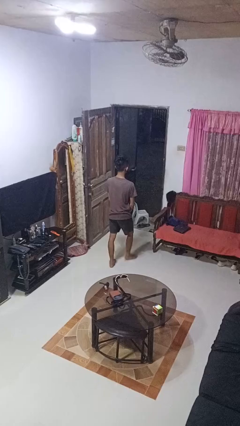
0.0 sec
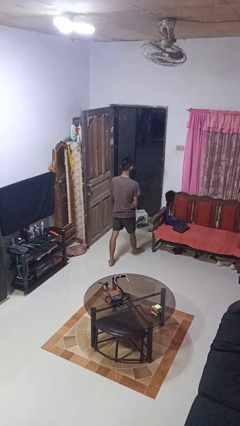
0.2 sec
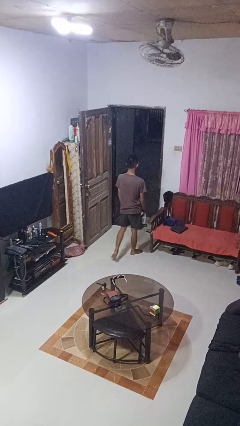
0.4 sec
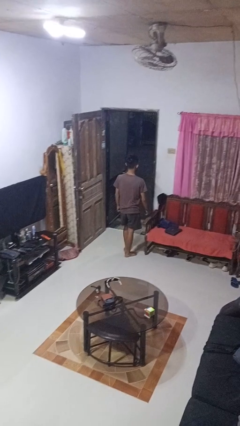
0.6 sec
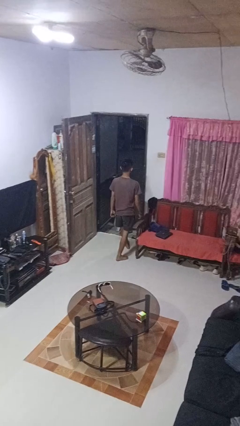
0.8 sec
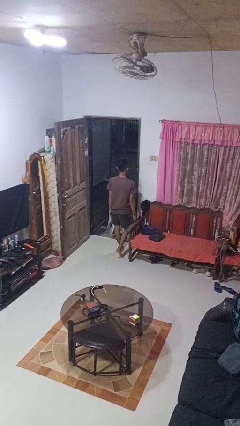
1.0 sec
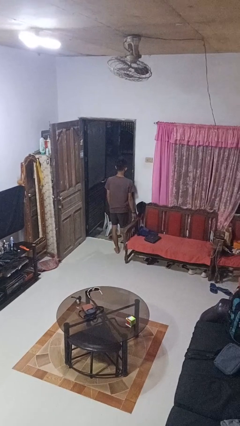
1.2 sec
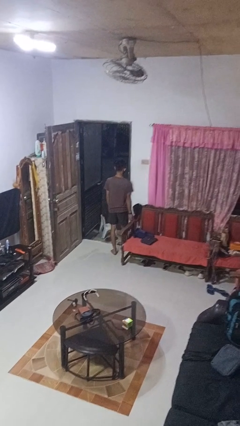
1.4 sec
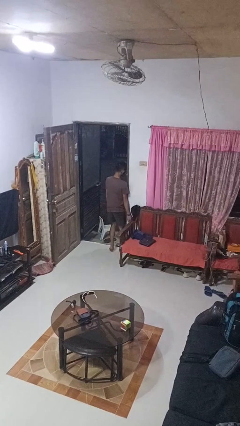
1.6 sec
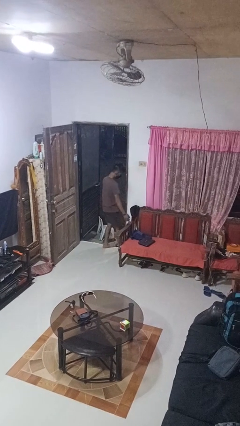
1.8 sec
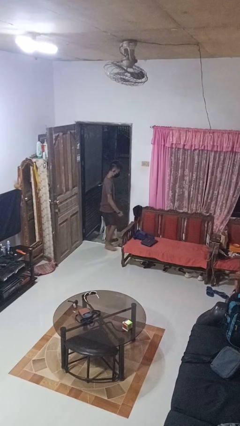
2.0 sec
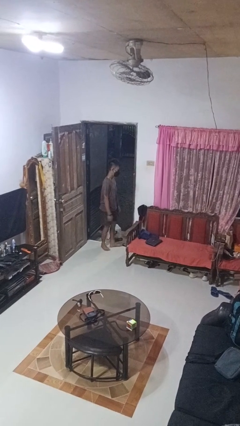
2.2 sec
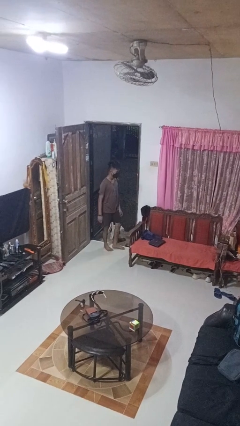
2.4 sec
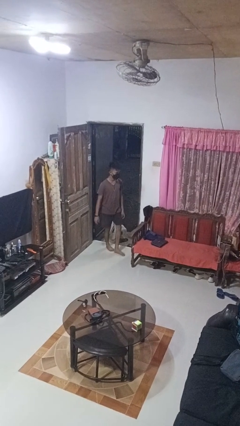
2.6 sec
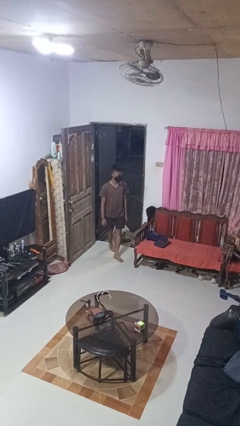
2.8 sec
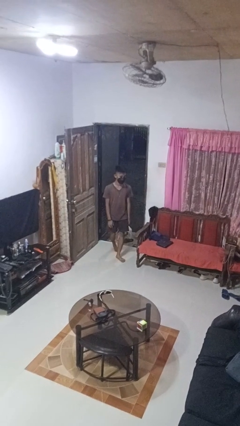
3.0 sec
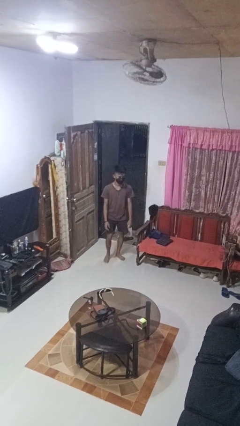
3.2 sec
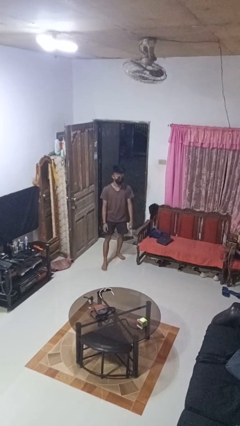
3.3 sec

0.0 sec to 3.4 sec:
person bumps into wall

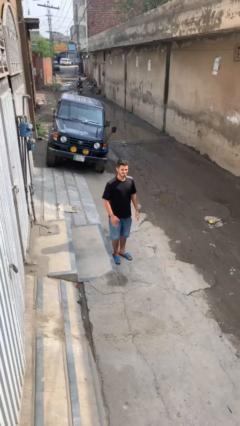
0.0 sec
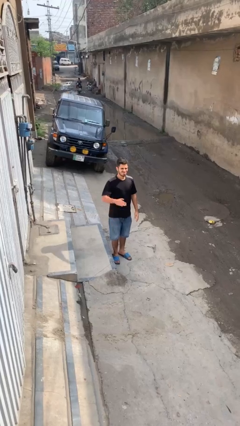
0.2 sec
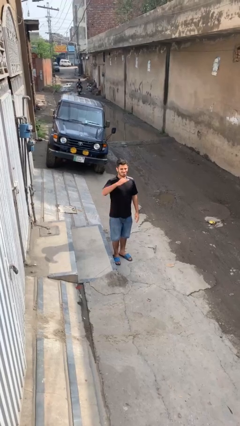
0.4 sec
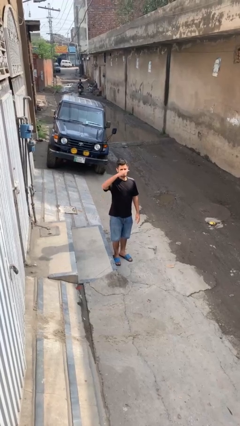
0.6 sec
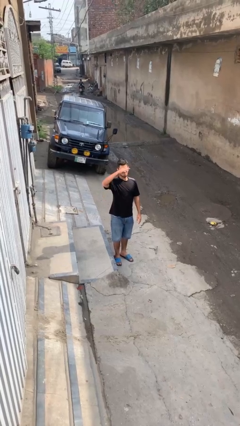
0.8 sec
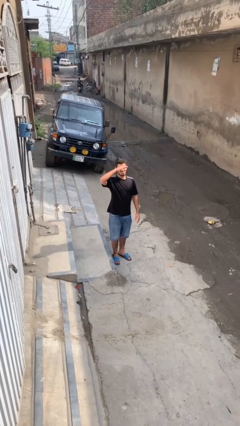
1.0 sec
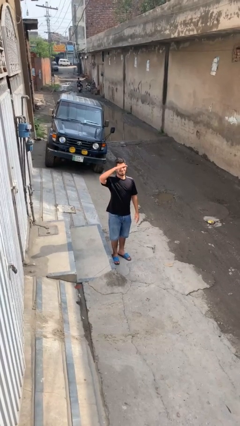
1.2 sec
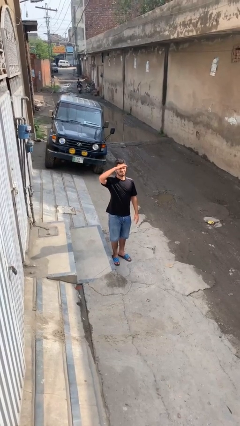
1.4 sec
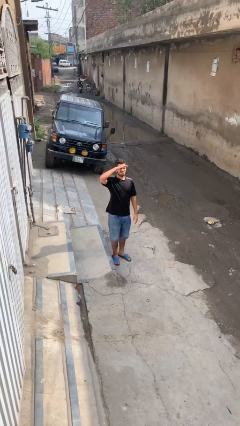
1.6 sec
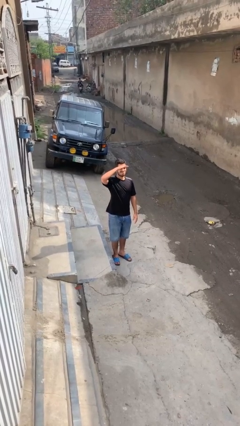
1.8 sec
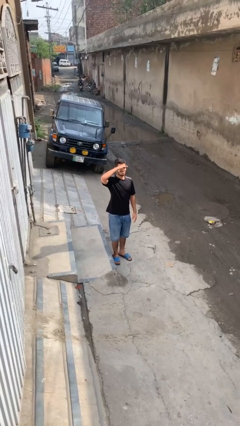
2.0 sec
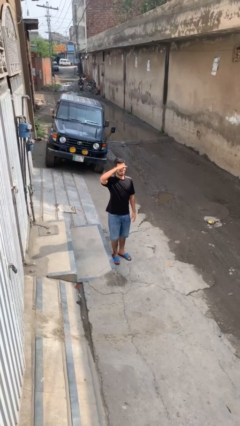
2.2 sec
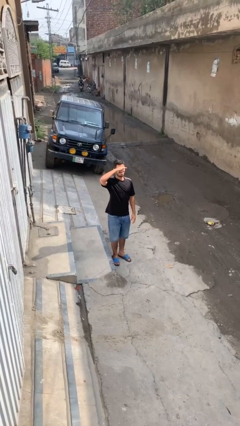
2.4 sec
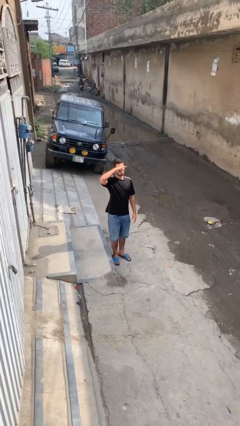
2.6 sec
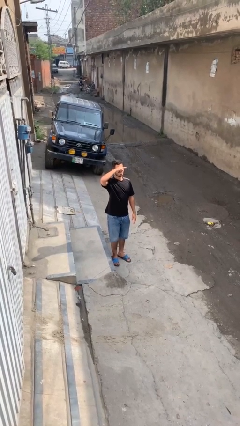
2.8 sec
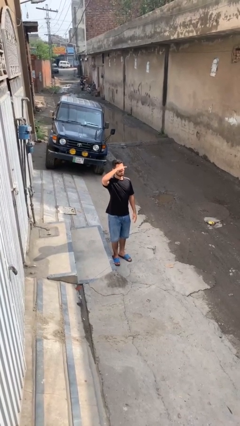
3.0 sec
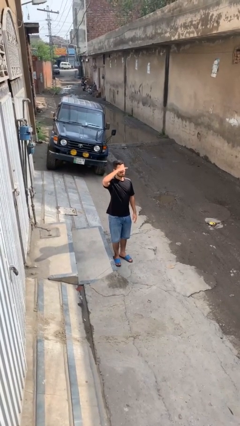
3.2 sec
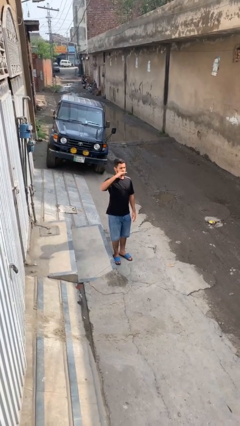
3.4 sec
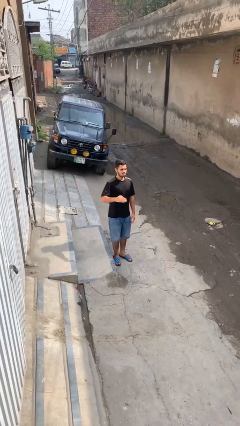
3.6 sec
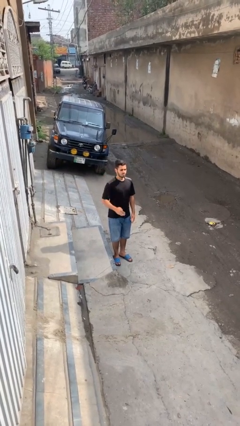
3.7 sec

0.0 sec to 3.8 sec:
person shades eyes

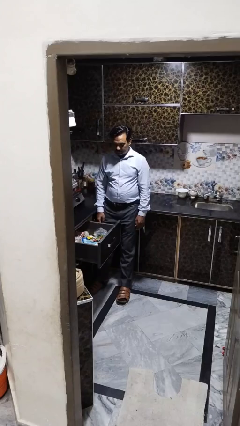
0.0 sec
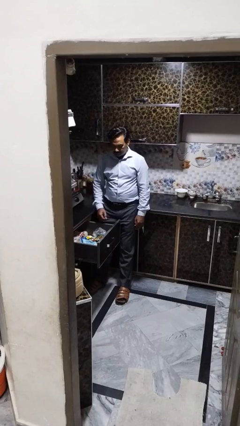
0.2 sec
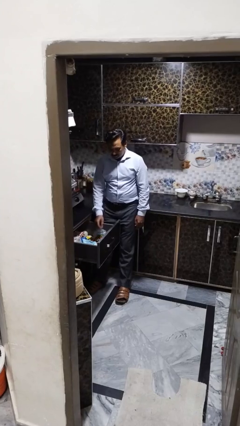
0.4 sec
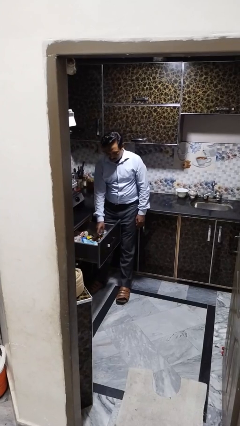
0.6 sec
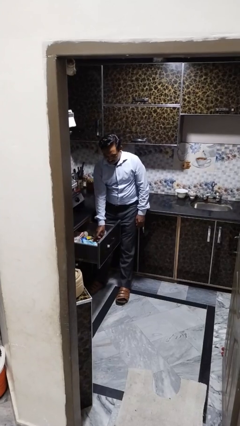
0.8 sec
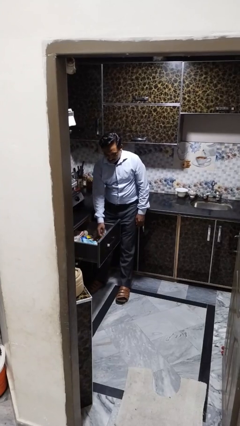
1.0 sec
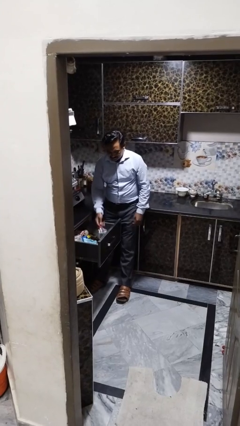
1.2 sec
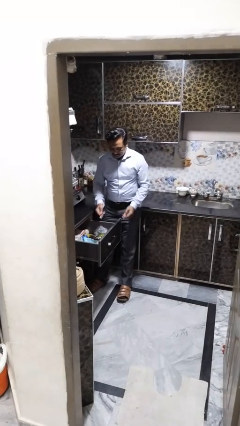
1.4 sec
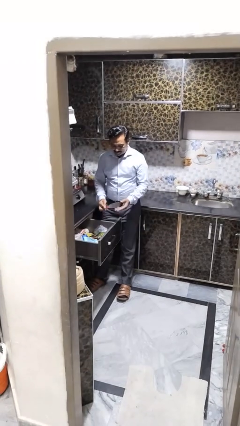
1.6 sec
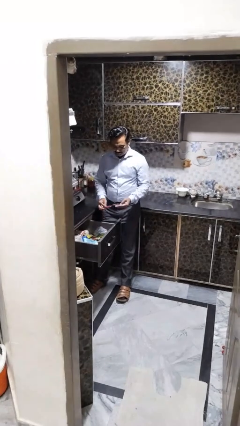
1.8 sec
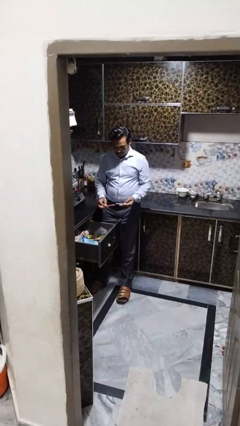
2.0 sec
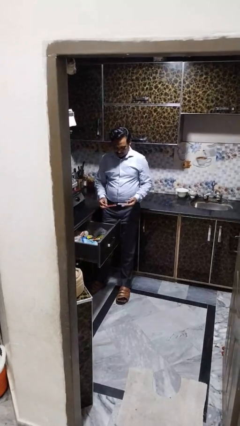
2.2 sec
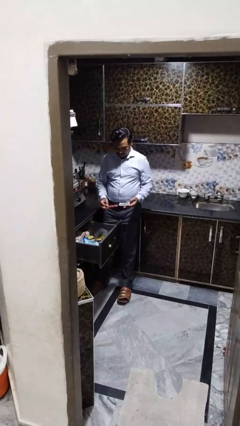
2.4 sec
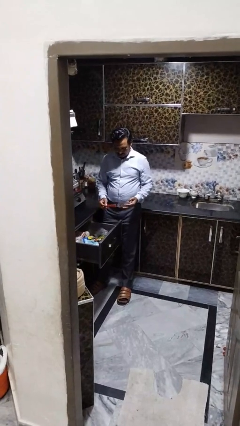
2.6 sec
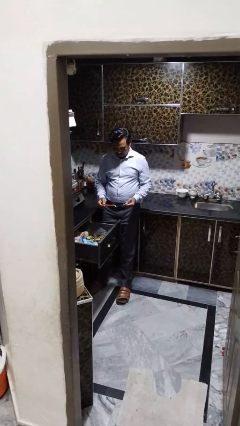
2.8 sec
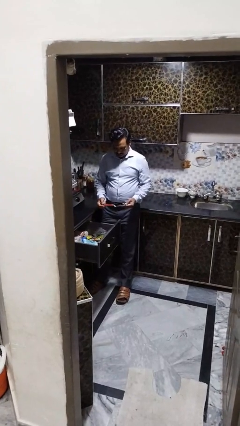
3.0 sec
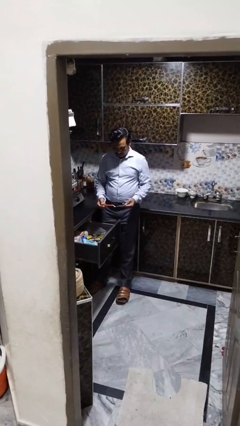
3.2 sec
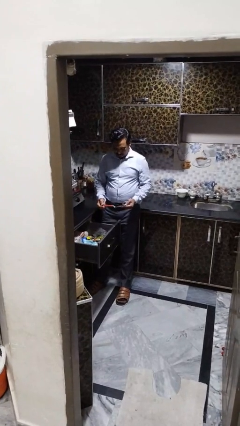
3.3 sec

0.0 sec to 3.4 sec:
person takes object from kitchen drawer

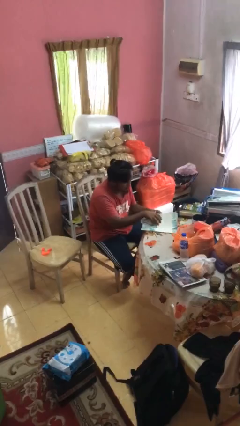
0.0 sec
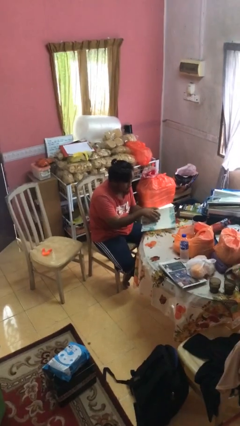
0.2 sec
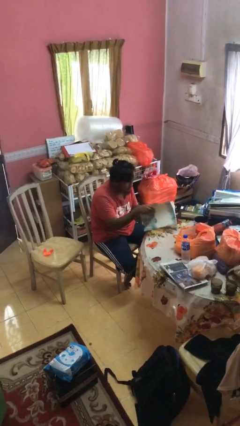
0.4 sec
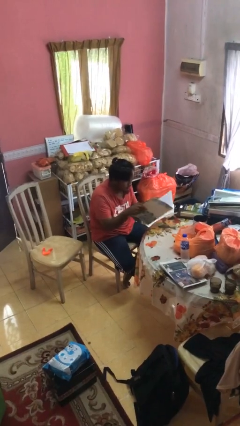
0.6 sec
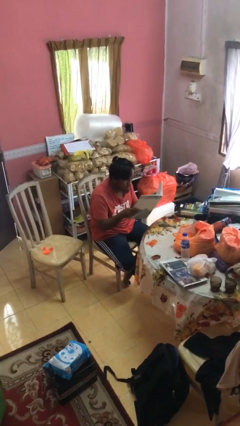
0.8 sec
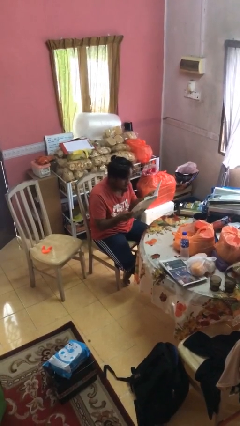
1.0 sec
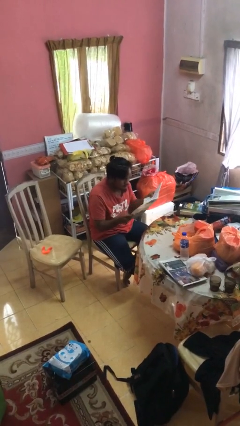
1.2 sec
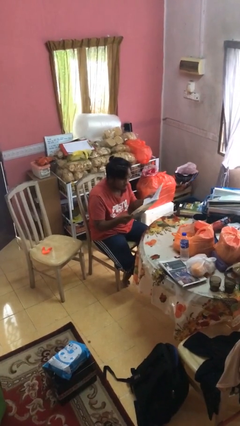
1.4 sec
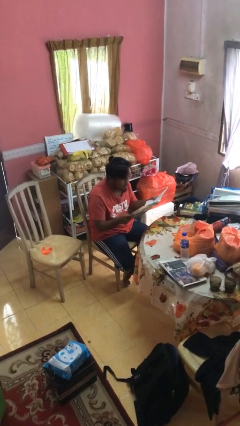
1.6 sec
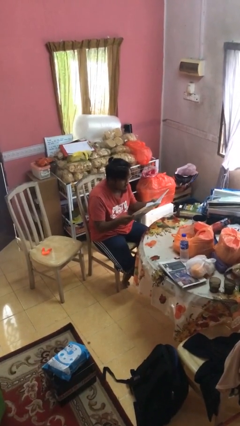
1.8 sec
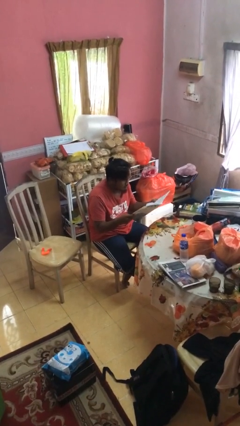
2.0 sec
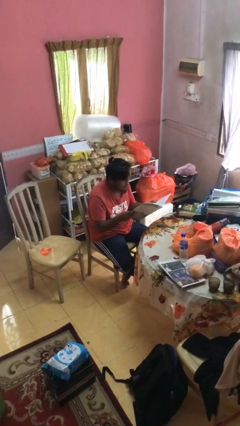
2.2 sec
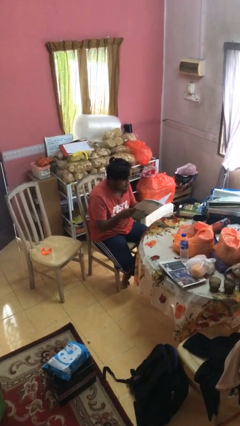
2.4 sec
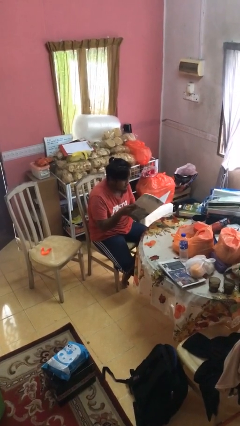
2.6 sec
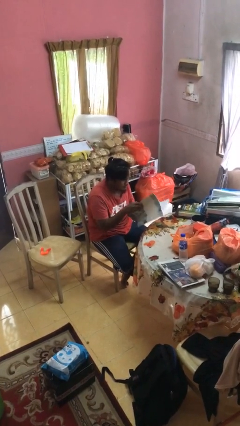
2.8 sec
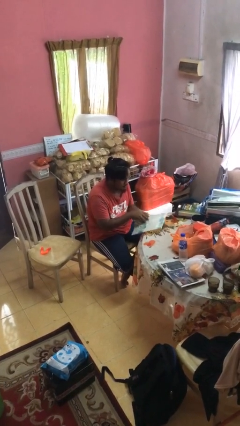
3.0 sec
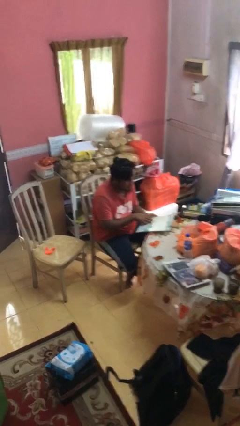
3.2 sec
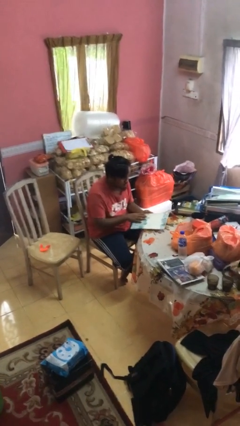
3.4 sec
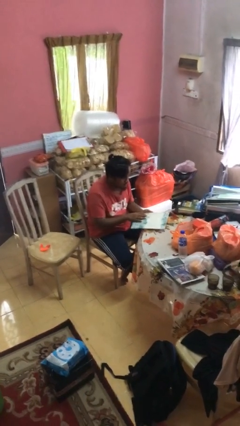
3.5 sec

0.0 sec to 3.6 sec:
person reads magazine

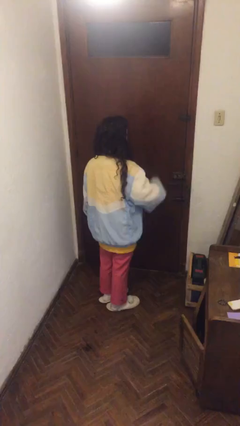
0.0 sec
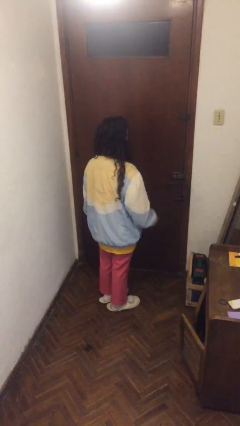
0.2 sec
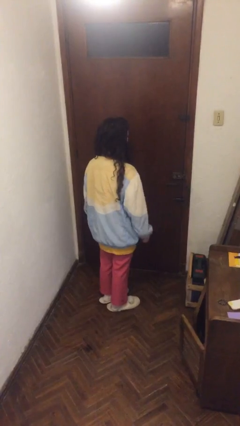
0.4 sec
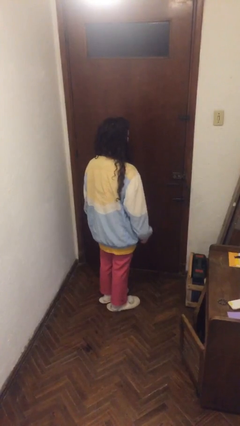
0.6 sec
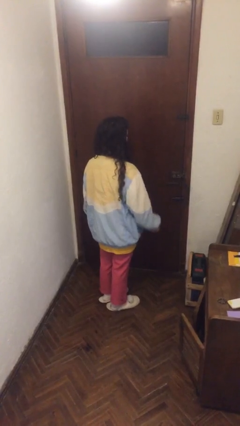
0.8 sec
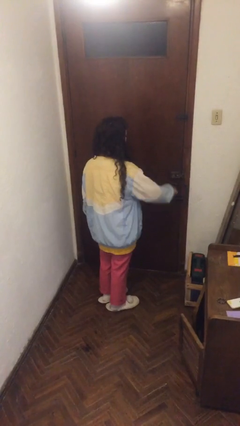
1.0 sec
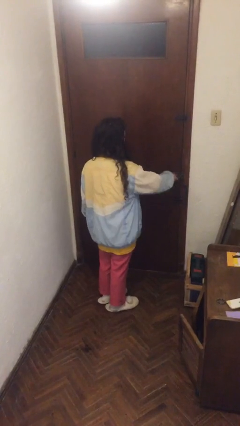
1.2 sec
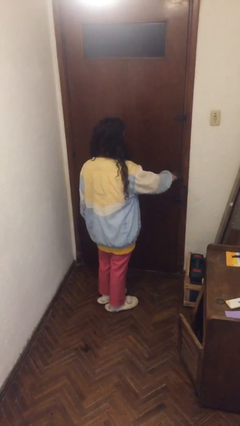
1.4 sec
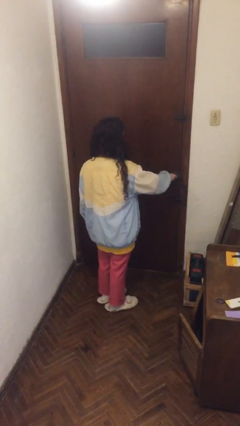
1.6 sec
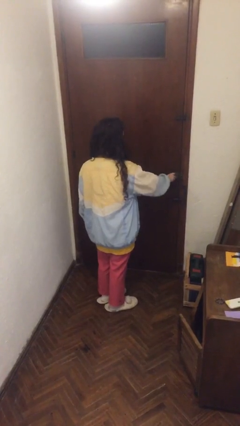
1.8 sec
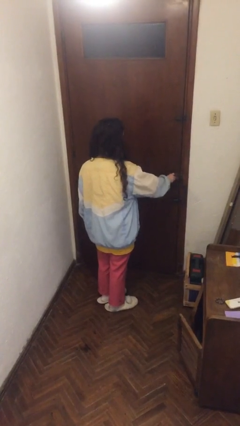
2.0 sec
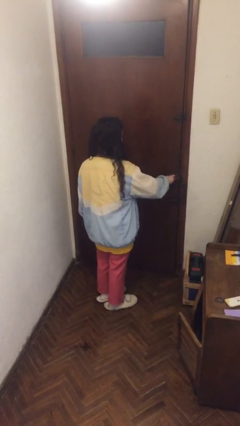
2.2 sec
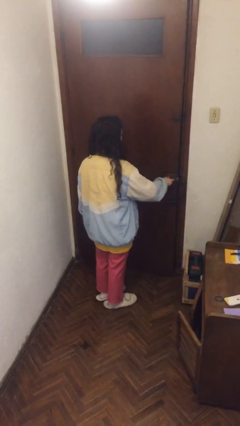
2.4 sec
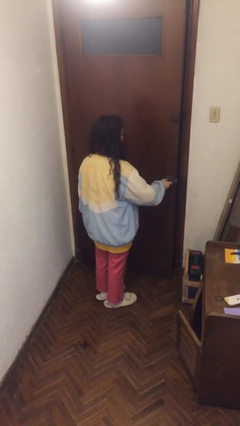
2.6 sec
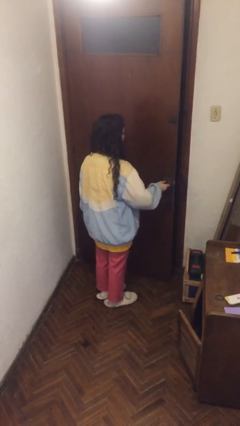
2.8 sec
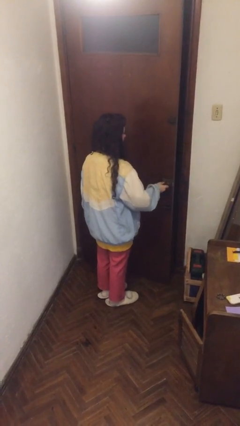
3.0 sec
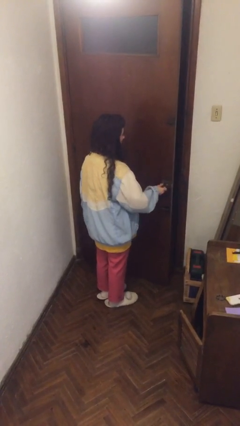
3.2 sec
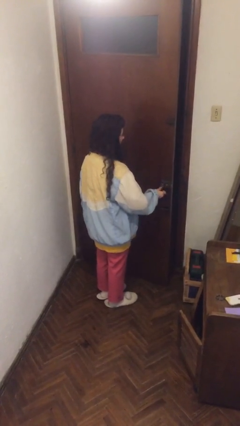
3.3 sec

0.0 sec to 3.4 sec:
person opens facility door
